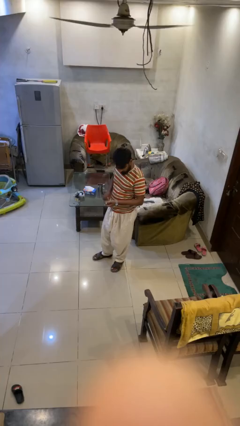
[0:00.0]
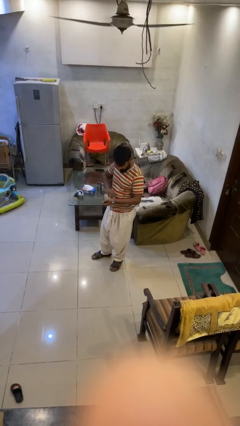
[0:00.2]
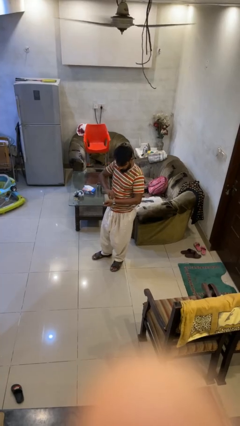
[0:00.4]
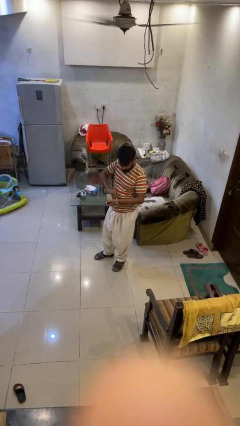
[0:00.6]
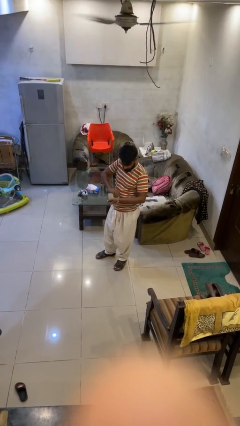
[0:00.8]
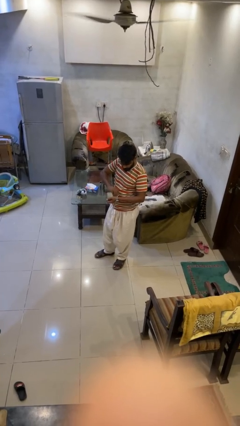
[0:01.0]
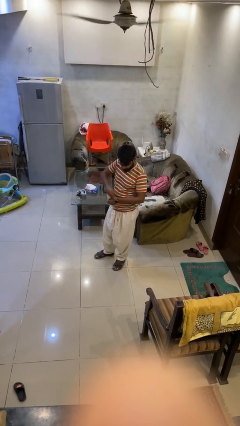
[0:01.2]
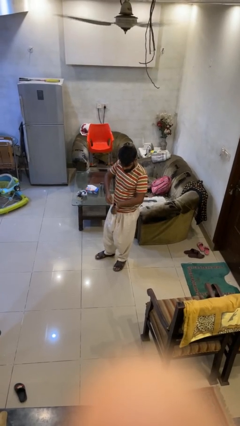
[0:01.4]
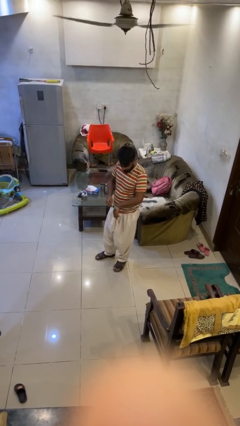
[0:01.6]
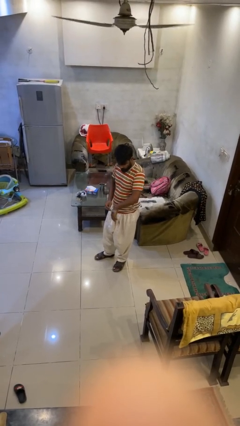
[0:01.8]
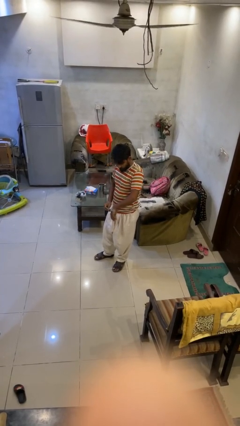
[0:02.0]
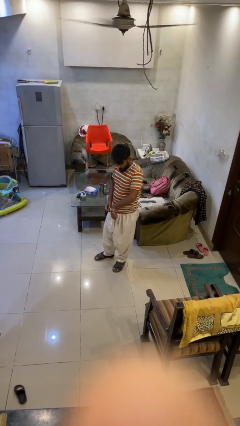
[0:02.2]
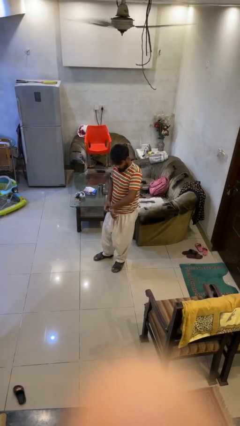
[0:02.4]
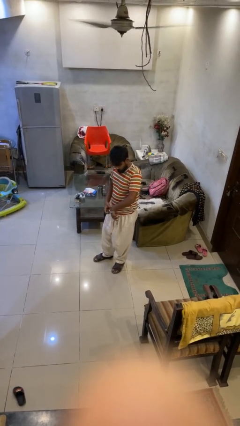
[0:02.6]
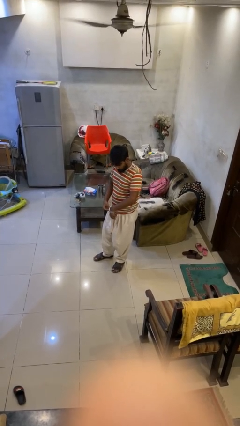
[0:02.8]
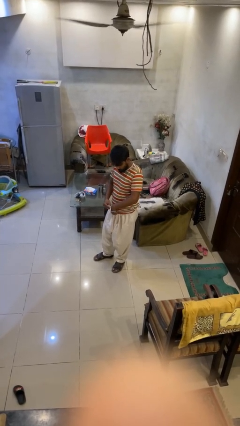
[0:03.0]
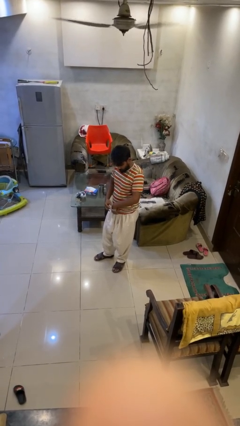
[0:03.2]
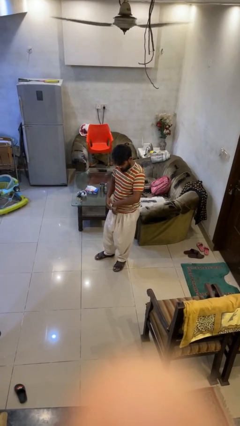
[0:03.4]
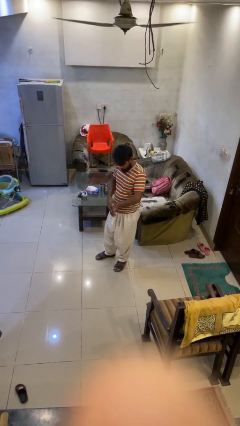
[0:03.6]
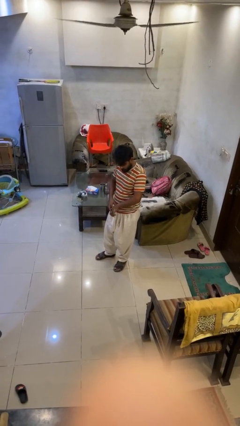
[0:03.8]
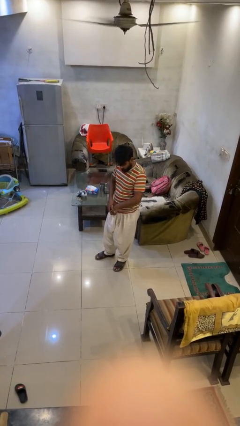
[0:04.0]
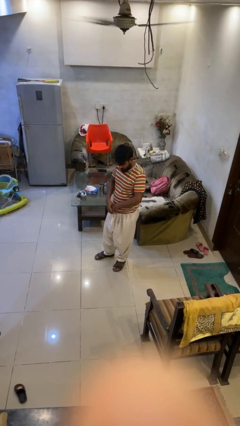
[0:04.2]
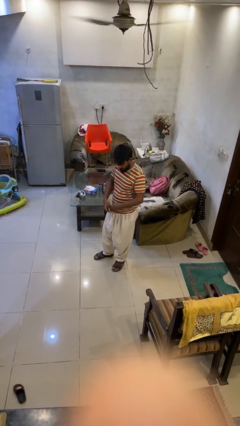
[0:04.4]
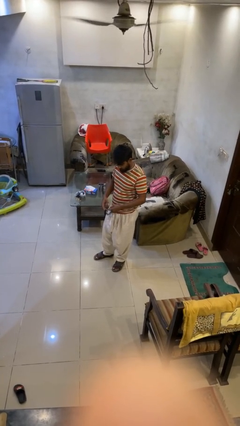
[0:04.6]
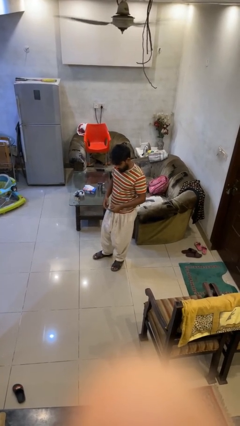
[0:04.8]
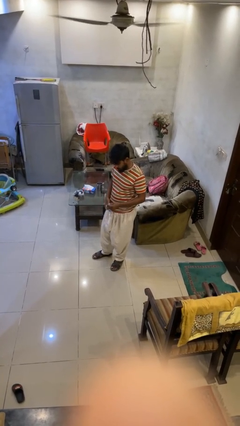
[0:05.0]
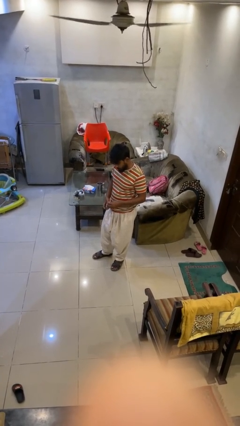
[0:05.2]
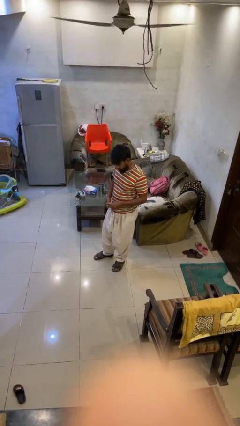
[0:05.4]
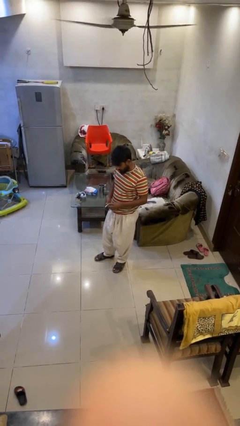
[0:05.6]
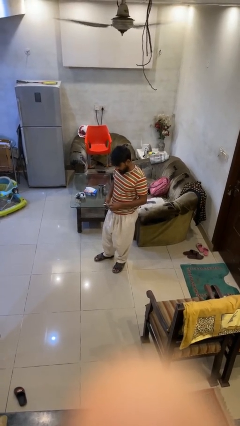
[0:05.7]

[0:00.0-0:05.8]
person takes off wristwatch

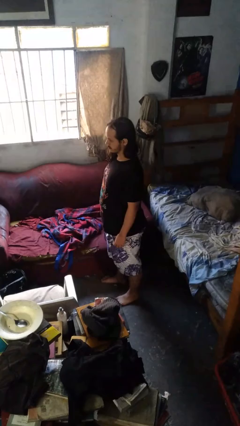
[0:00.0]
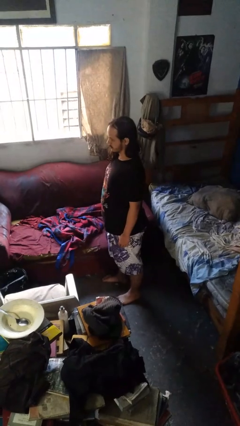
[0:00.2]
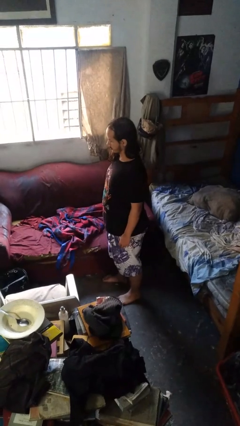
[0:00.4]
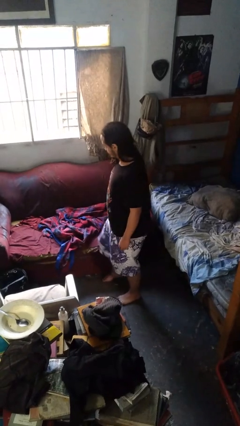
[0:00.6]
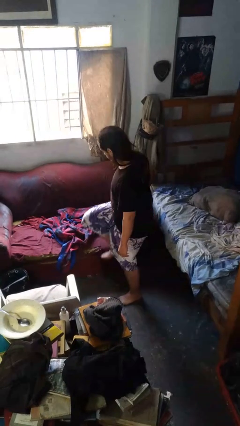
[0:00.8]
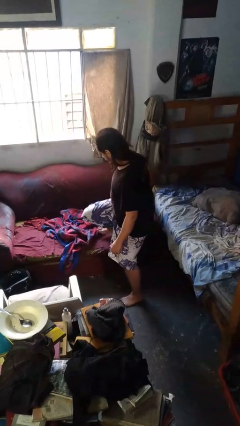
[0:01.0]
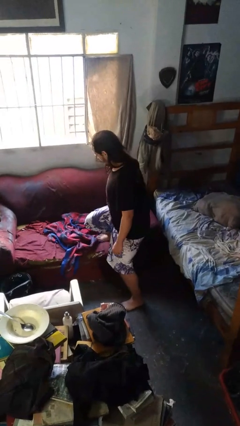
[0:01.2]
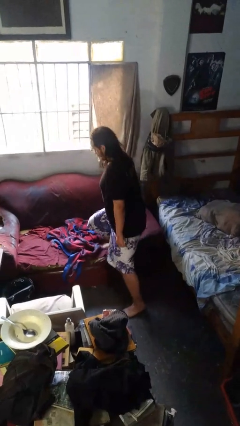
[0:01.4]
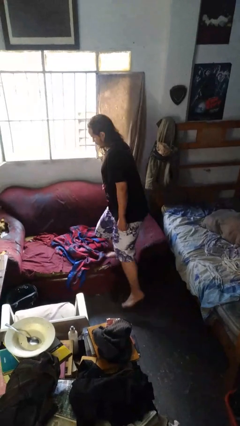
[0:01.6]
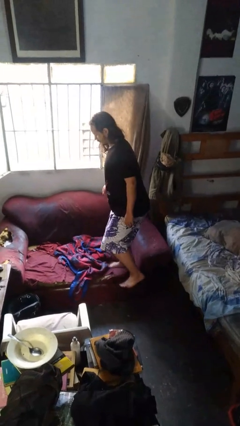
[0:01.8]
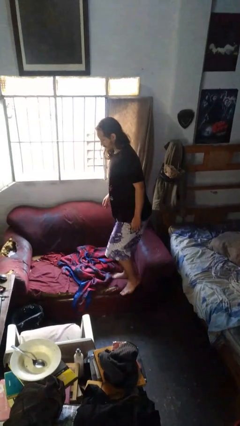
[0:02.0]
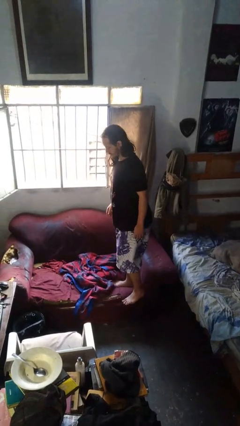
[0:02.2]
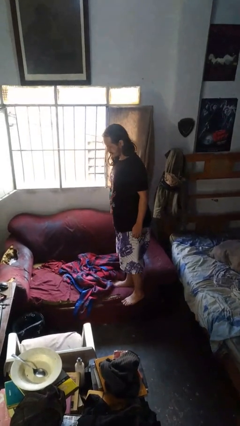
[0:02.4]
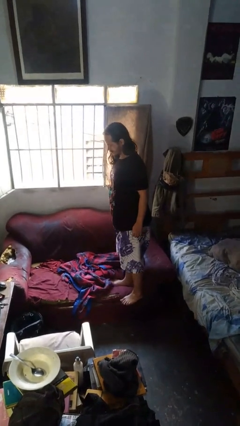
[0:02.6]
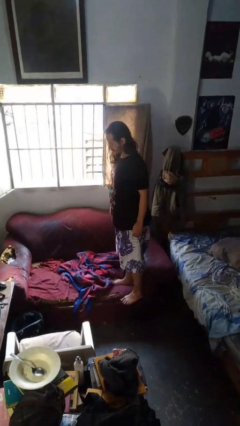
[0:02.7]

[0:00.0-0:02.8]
person climbs on couch

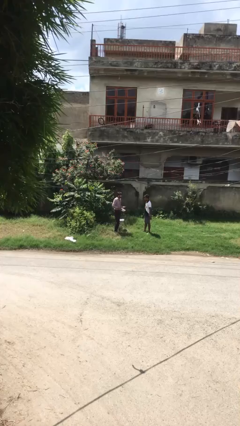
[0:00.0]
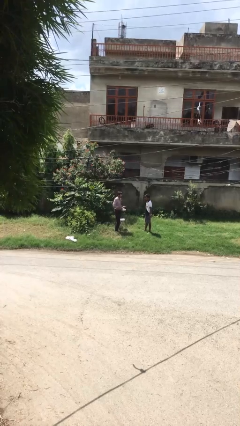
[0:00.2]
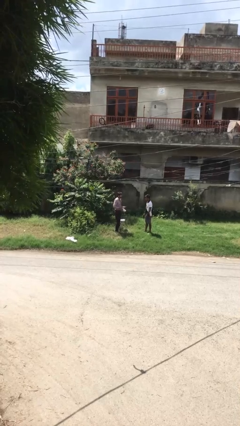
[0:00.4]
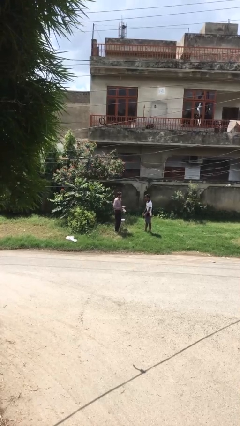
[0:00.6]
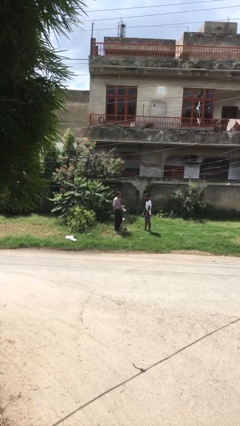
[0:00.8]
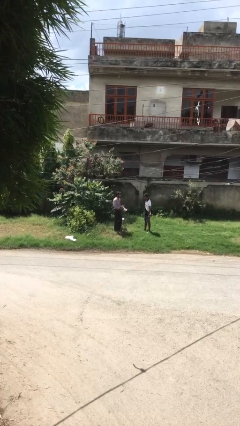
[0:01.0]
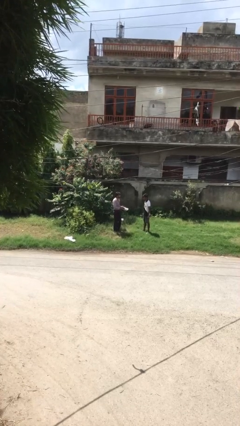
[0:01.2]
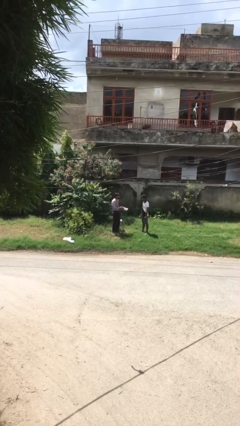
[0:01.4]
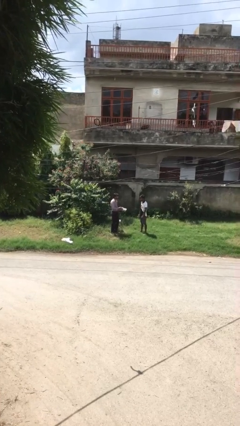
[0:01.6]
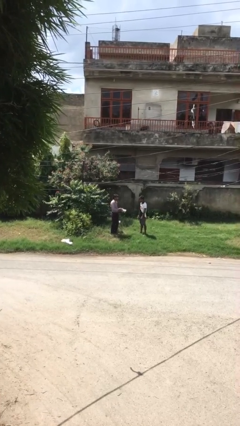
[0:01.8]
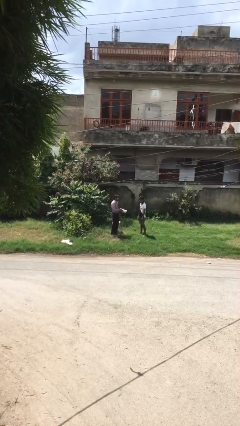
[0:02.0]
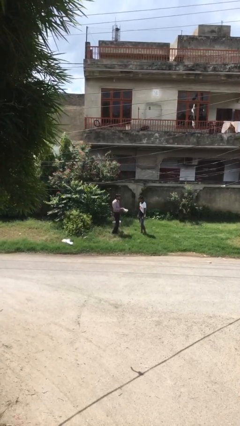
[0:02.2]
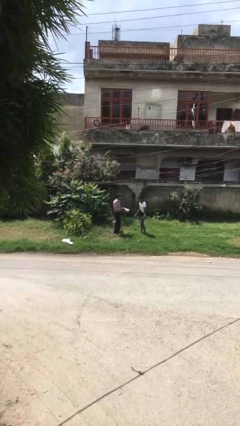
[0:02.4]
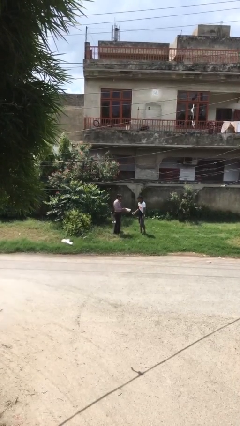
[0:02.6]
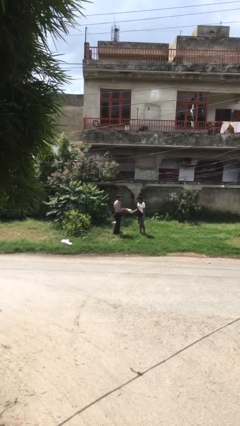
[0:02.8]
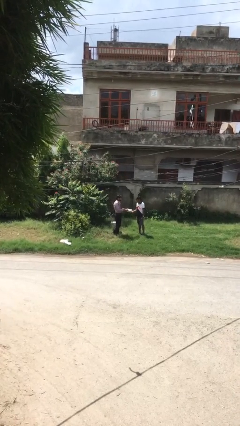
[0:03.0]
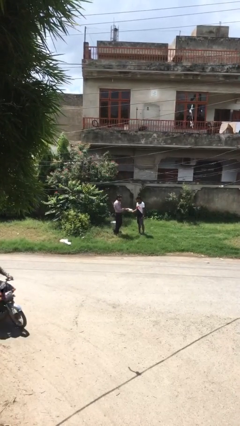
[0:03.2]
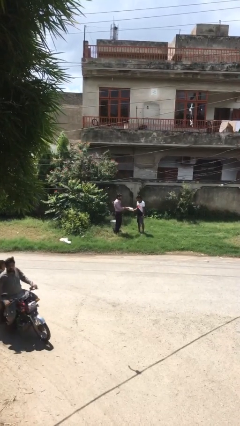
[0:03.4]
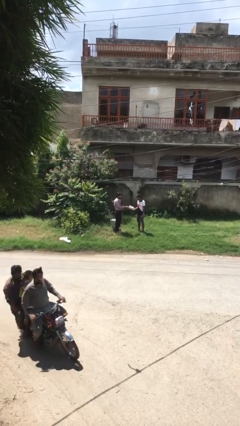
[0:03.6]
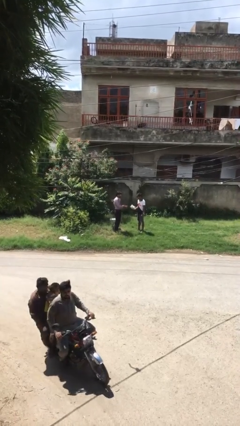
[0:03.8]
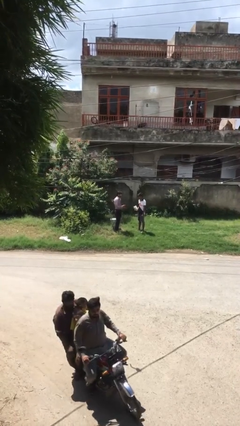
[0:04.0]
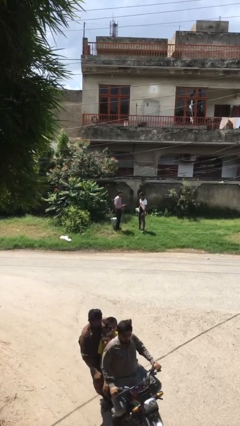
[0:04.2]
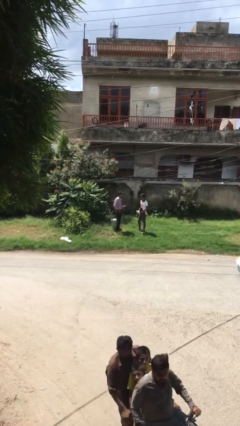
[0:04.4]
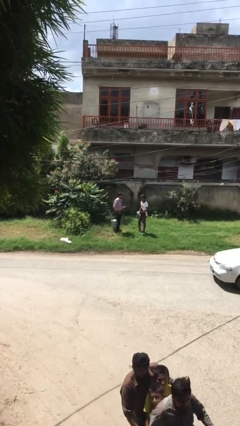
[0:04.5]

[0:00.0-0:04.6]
person transfers object to person

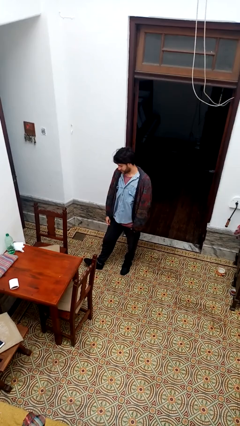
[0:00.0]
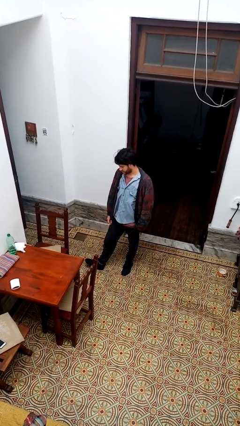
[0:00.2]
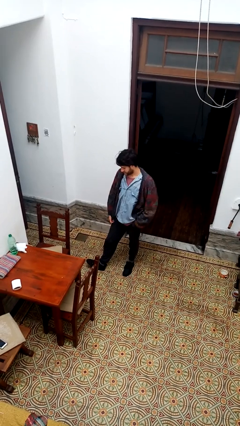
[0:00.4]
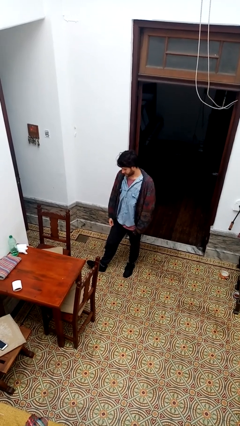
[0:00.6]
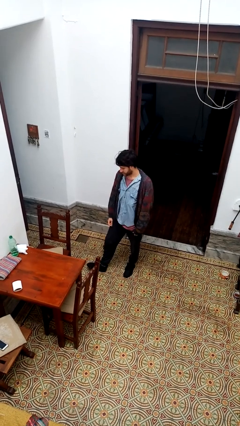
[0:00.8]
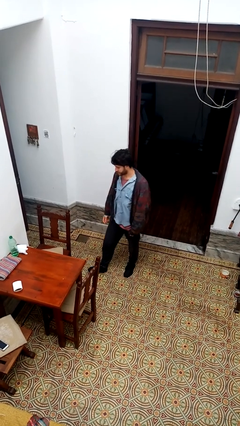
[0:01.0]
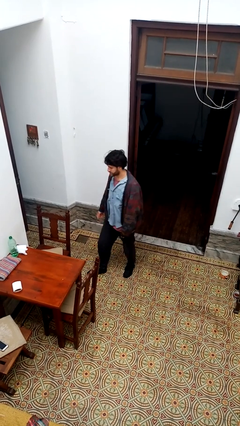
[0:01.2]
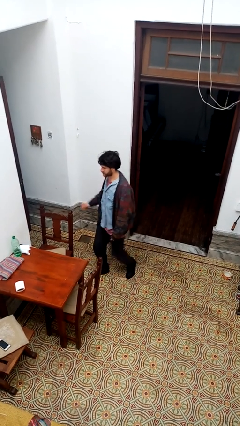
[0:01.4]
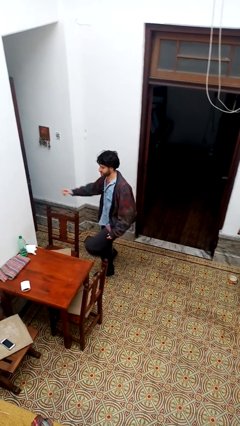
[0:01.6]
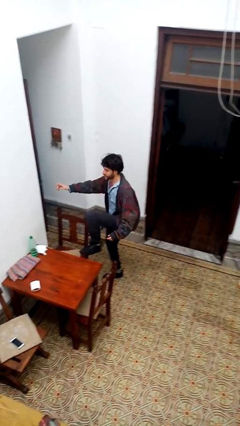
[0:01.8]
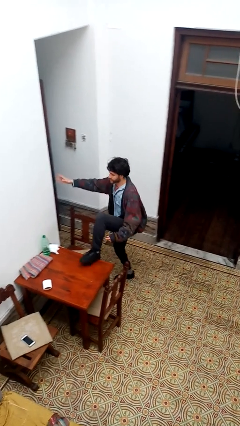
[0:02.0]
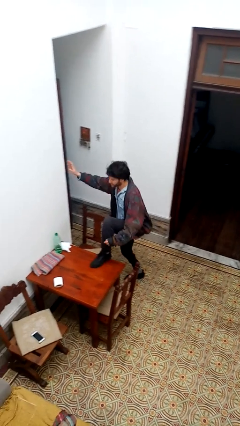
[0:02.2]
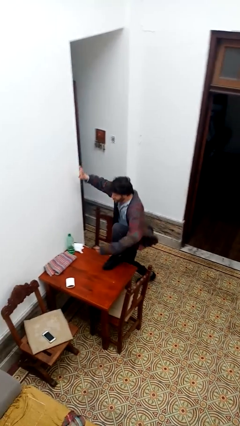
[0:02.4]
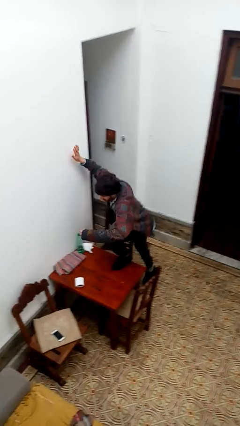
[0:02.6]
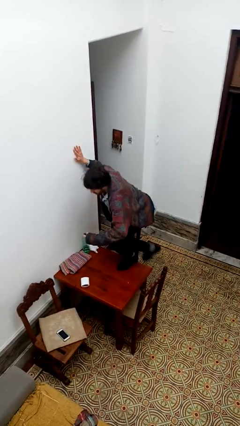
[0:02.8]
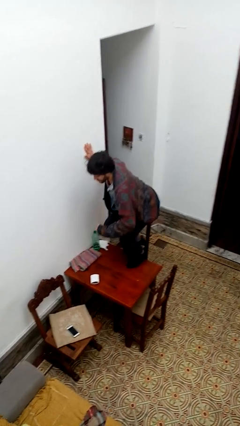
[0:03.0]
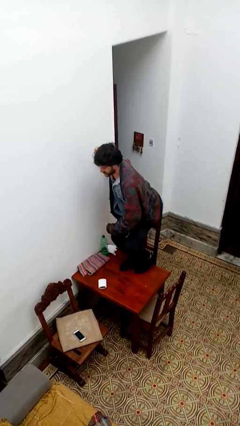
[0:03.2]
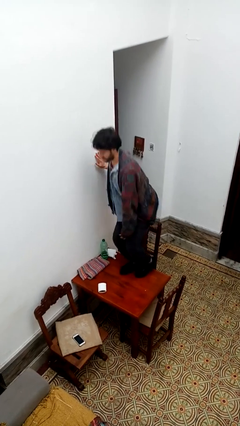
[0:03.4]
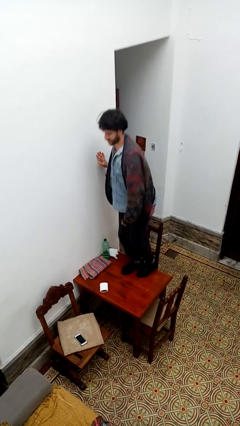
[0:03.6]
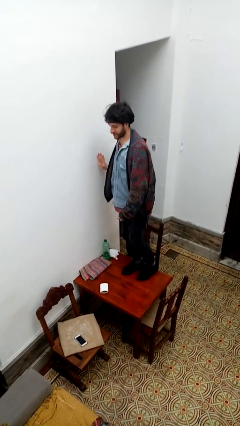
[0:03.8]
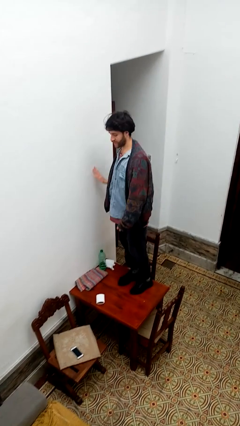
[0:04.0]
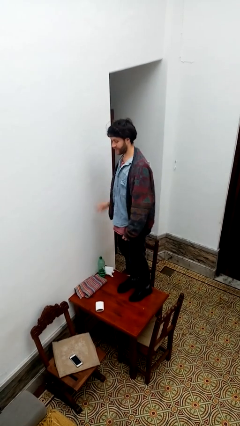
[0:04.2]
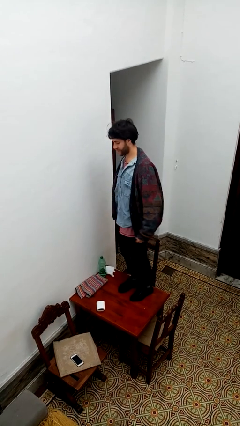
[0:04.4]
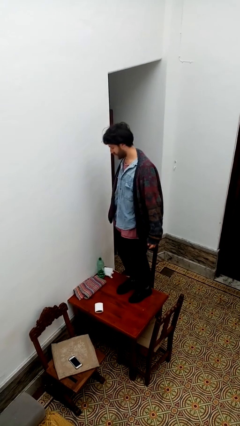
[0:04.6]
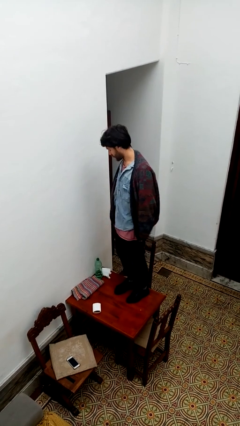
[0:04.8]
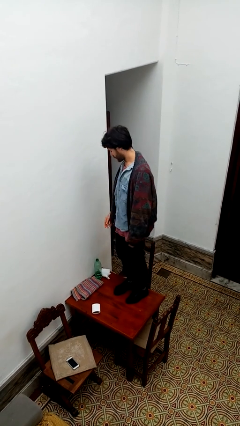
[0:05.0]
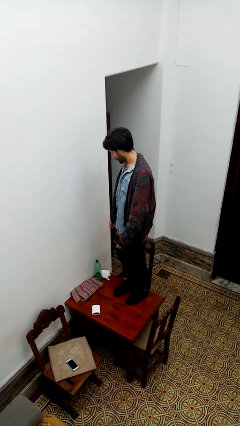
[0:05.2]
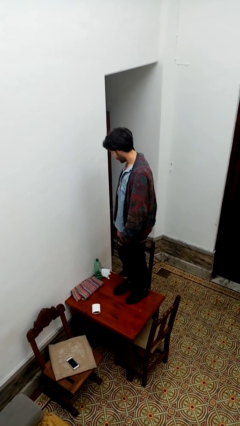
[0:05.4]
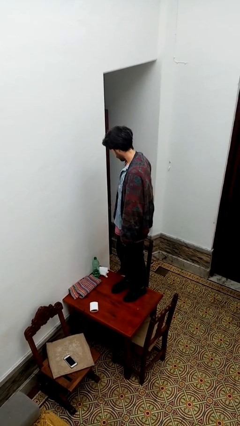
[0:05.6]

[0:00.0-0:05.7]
person climbs on table
